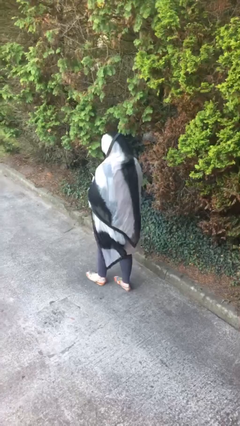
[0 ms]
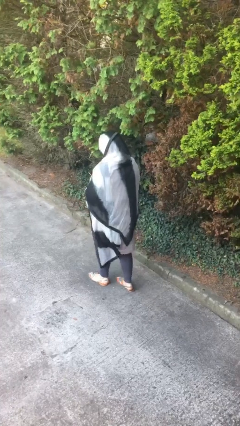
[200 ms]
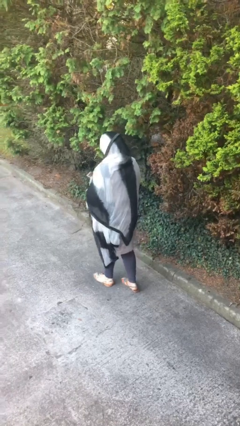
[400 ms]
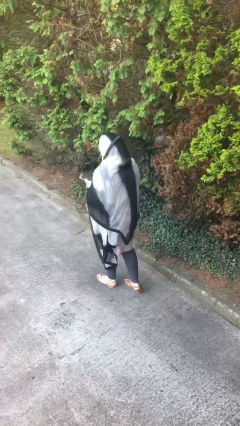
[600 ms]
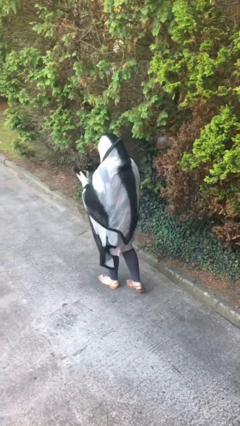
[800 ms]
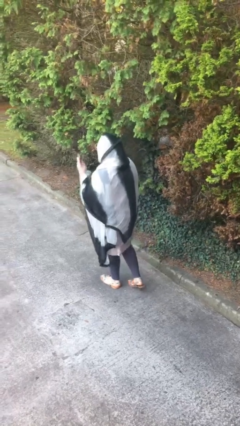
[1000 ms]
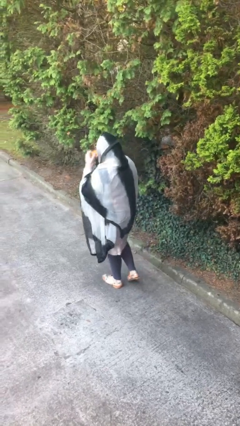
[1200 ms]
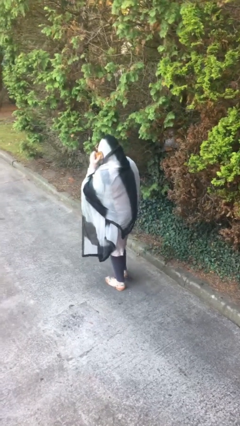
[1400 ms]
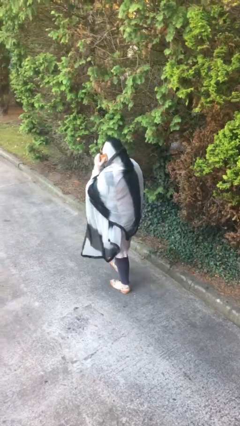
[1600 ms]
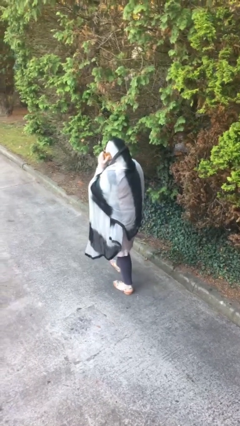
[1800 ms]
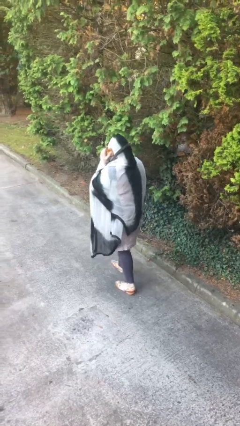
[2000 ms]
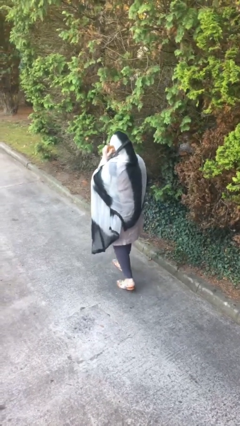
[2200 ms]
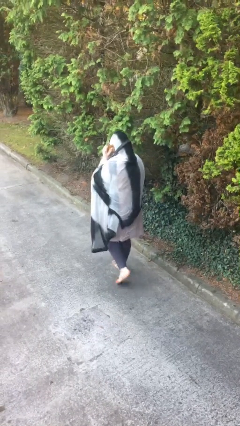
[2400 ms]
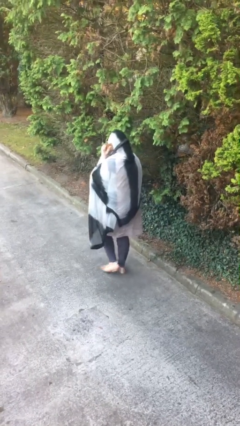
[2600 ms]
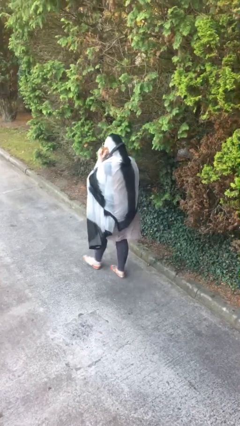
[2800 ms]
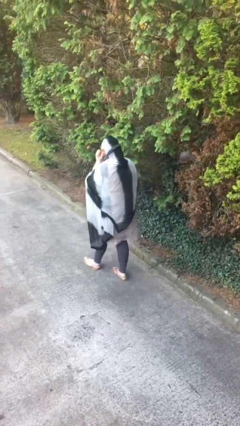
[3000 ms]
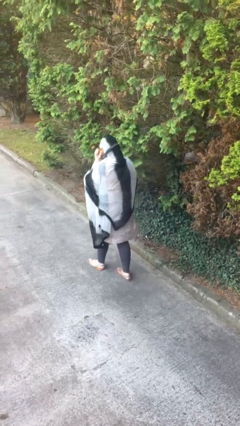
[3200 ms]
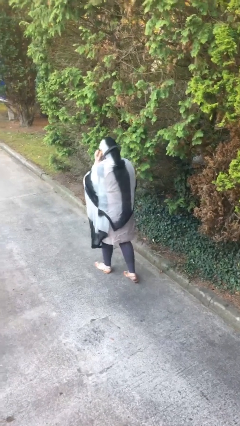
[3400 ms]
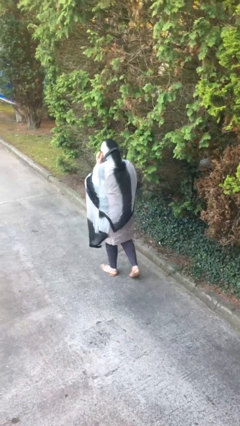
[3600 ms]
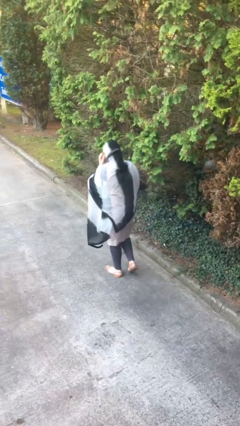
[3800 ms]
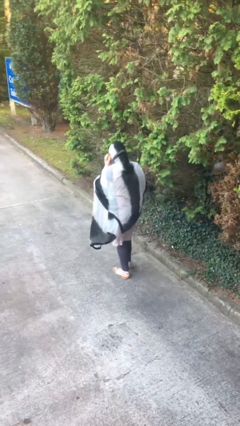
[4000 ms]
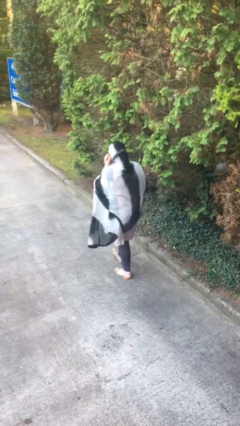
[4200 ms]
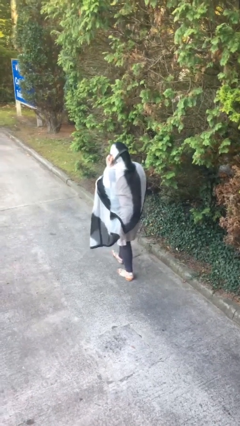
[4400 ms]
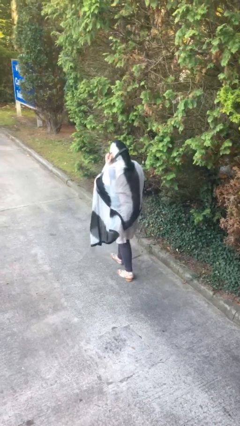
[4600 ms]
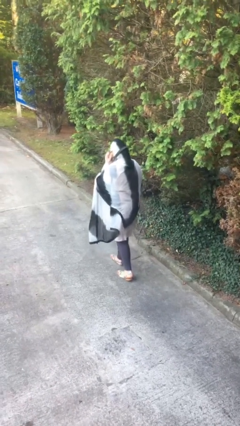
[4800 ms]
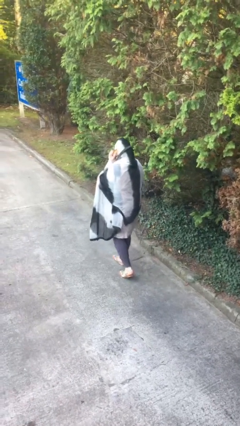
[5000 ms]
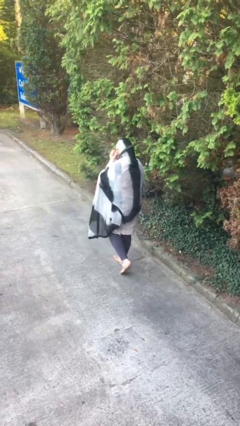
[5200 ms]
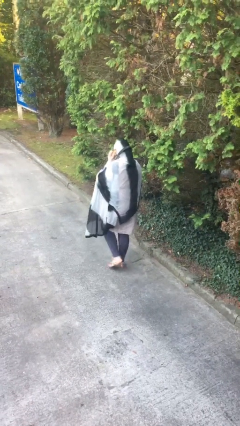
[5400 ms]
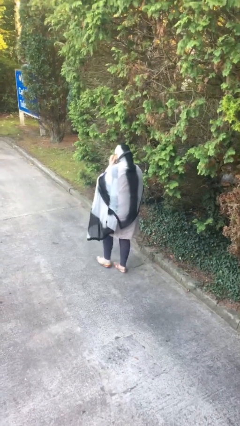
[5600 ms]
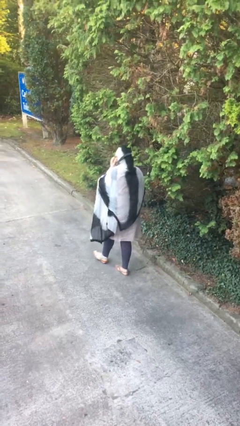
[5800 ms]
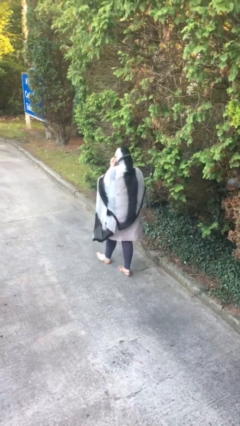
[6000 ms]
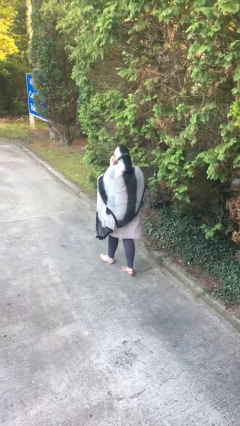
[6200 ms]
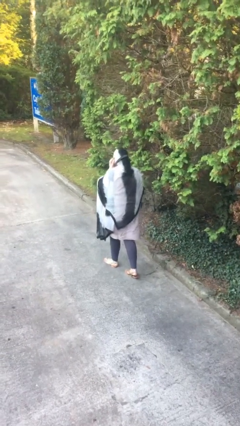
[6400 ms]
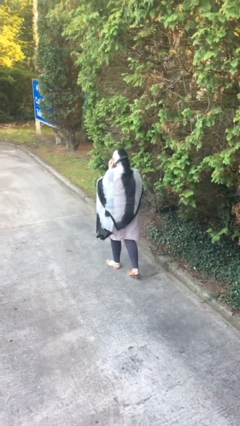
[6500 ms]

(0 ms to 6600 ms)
person talks on phone

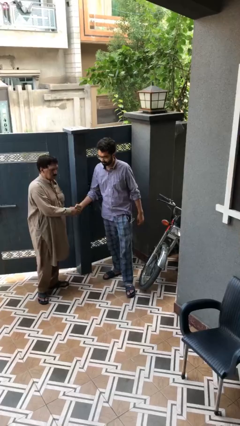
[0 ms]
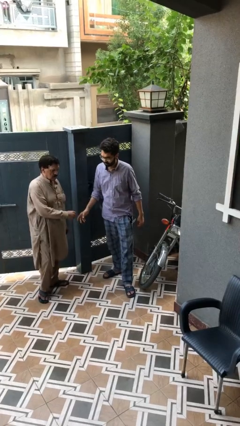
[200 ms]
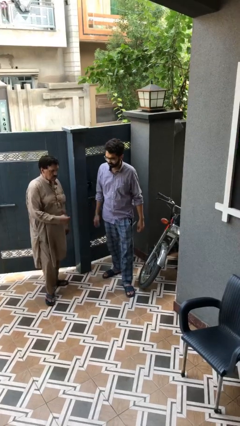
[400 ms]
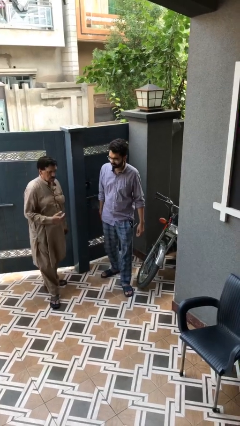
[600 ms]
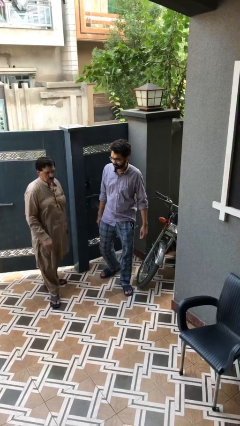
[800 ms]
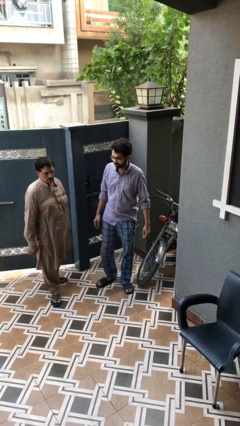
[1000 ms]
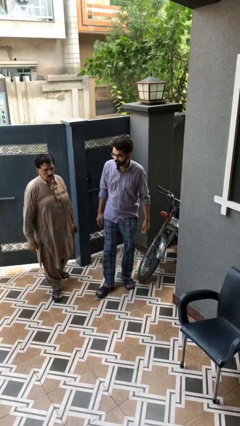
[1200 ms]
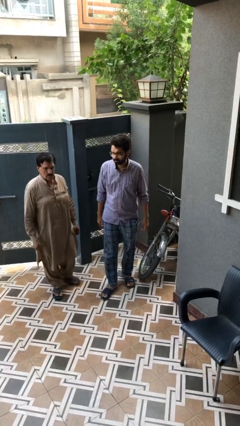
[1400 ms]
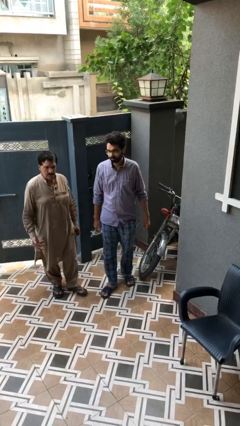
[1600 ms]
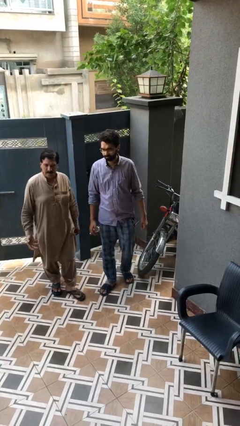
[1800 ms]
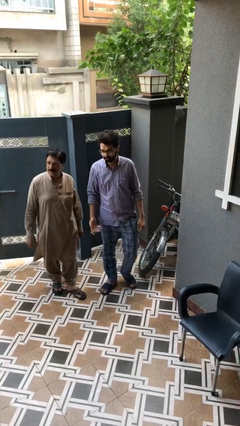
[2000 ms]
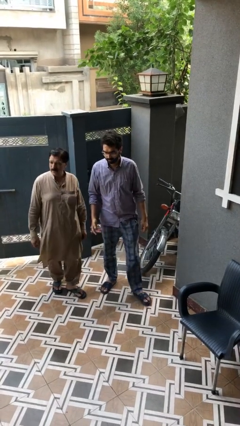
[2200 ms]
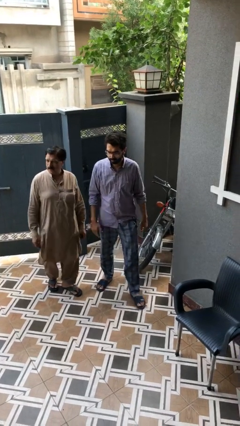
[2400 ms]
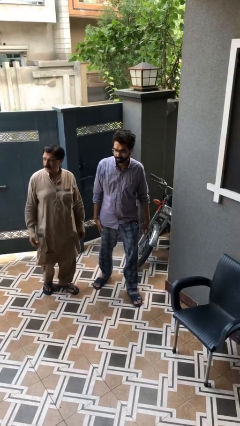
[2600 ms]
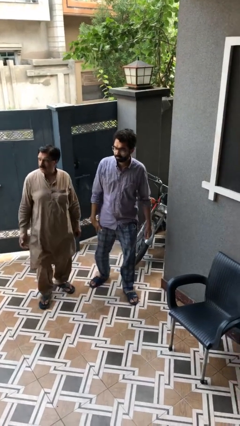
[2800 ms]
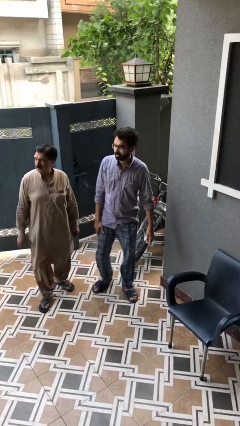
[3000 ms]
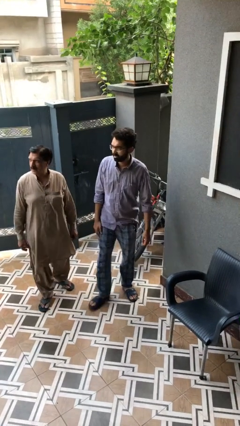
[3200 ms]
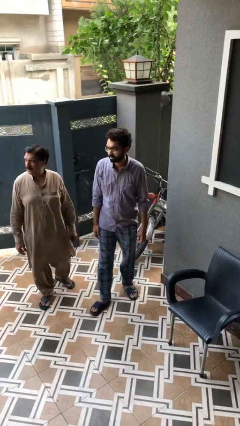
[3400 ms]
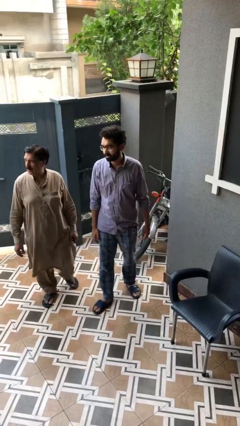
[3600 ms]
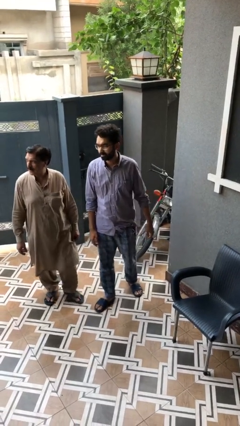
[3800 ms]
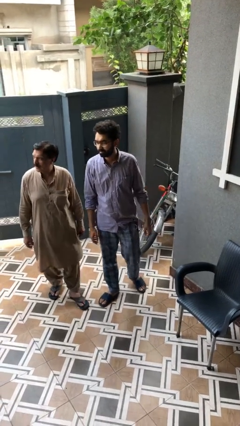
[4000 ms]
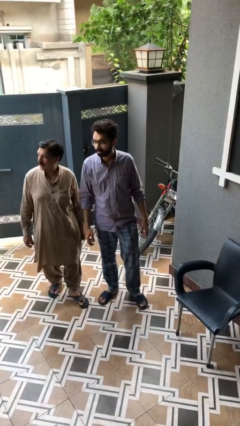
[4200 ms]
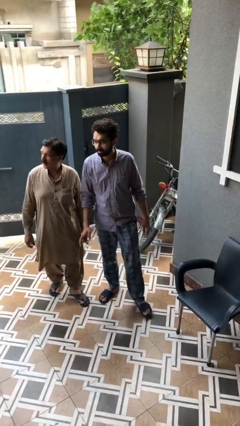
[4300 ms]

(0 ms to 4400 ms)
person talks to person

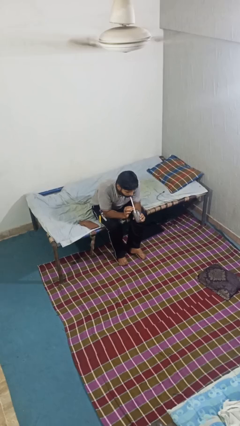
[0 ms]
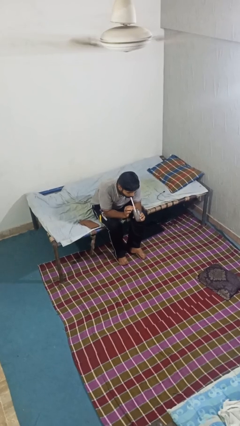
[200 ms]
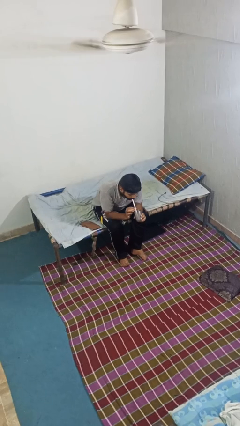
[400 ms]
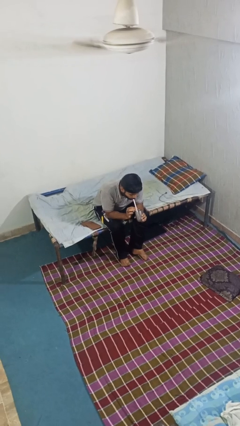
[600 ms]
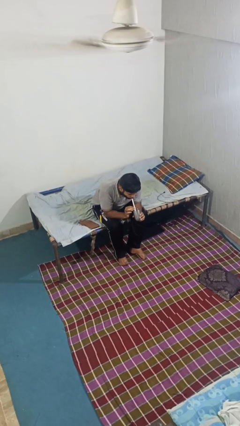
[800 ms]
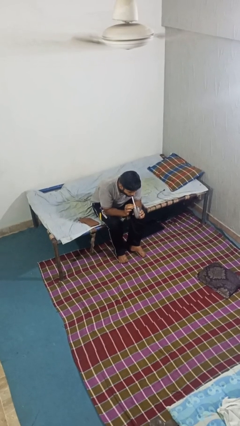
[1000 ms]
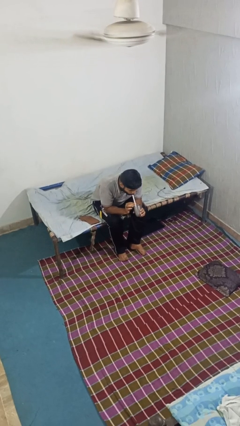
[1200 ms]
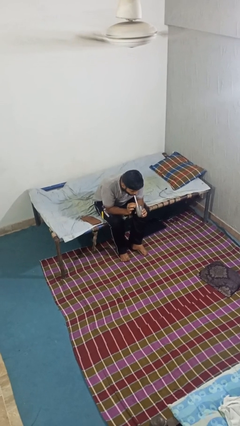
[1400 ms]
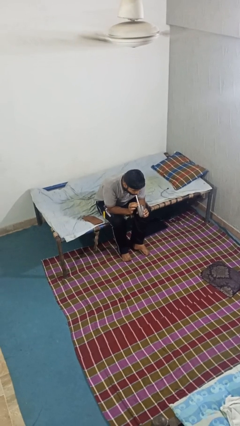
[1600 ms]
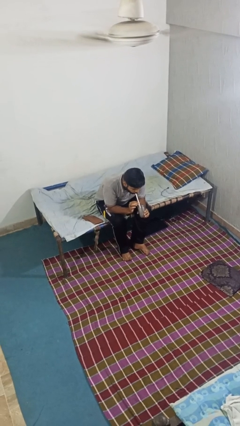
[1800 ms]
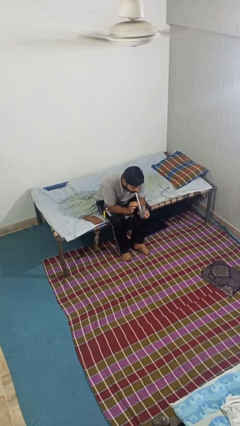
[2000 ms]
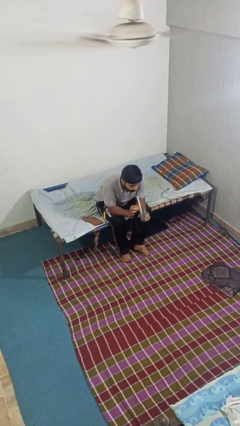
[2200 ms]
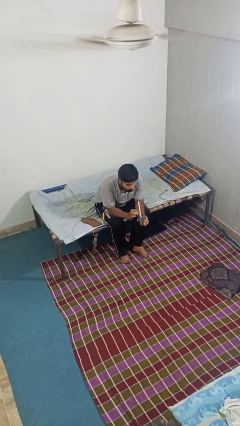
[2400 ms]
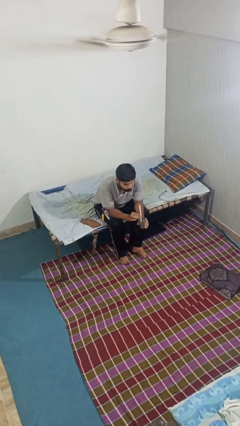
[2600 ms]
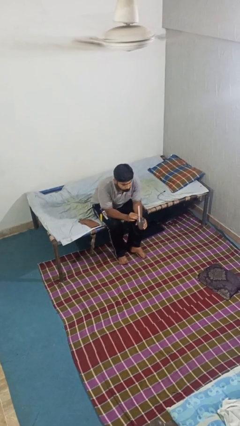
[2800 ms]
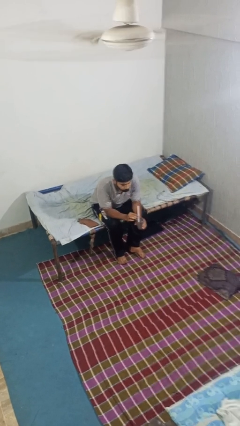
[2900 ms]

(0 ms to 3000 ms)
person drinks from straw

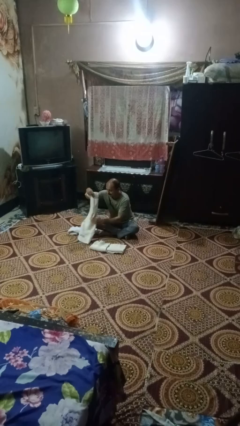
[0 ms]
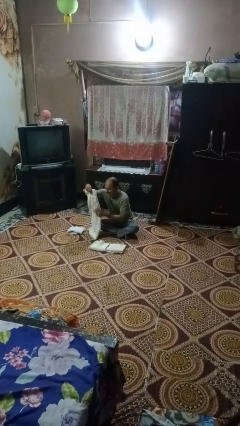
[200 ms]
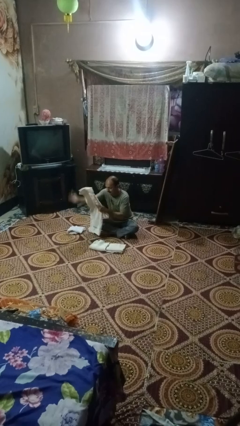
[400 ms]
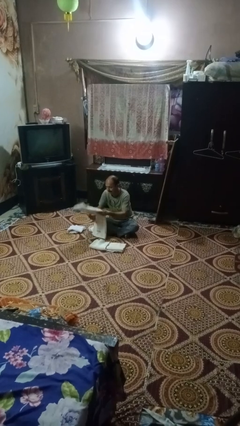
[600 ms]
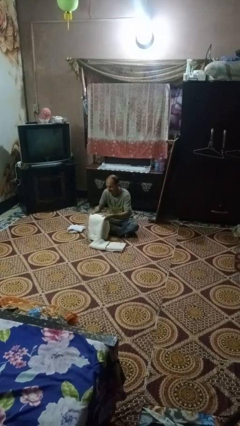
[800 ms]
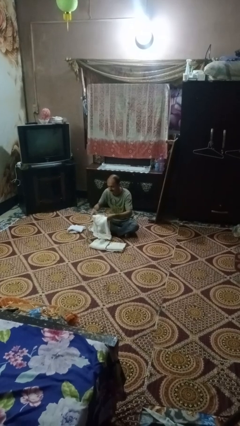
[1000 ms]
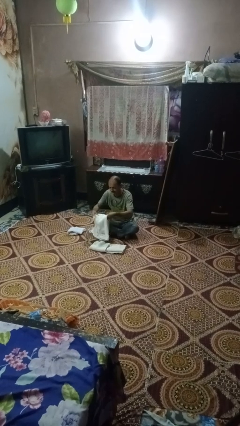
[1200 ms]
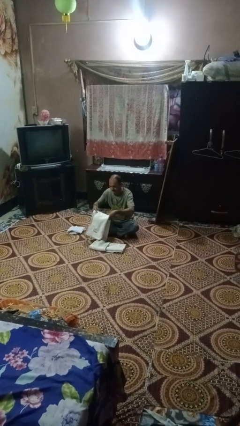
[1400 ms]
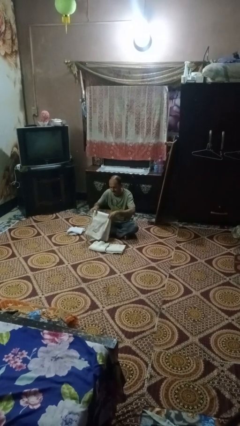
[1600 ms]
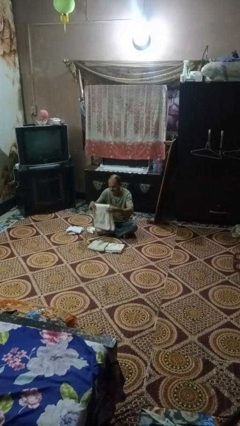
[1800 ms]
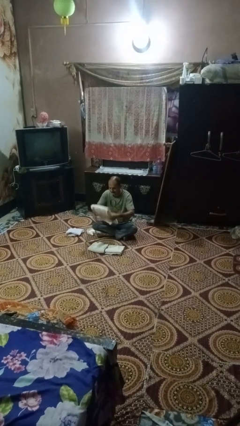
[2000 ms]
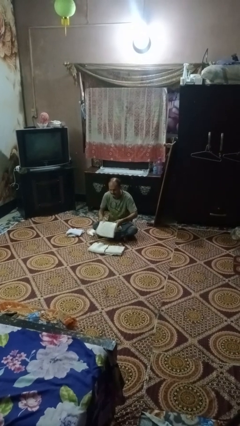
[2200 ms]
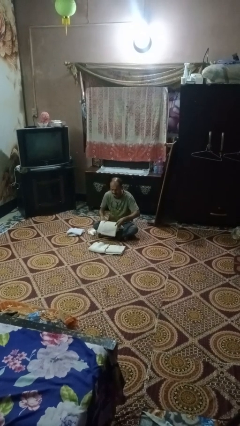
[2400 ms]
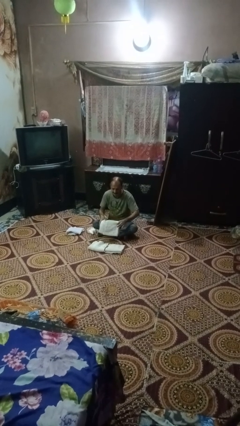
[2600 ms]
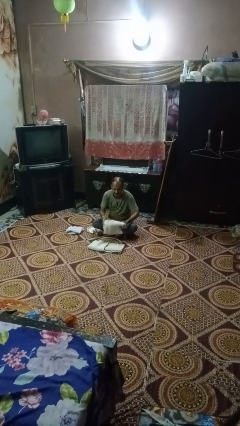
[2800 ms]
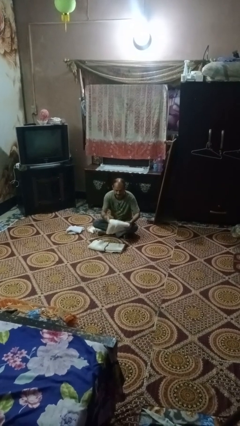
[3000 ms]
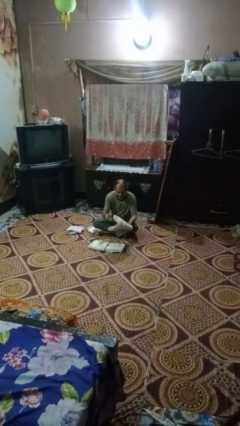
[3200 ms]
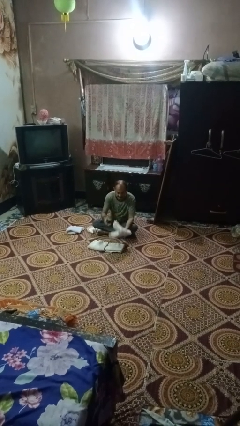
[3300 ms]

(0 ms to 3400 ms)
person folds towel

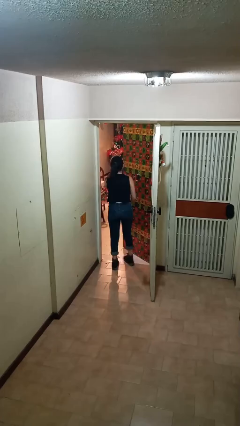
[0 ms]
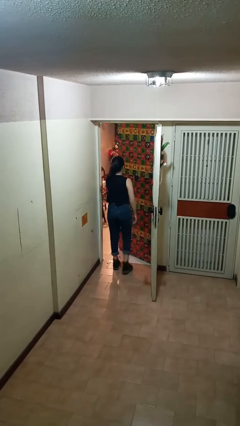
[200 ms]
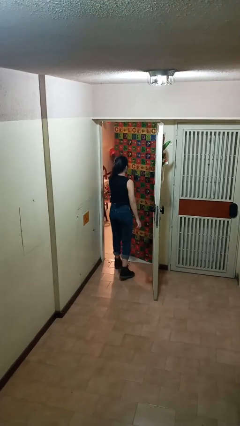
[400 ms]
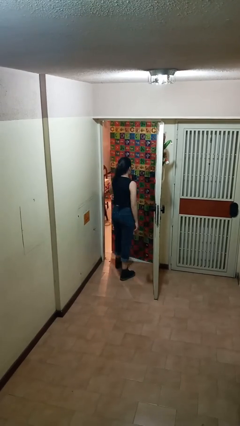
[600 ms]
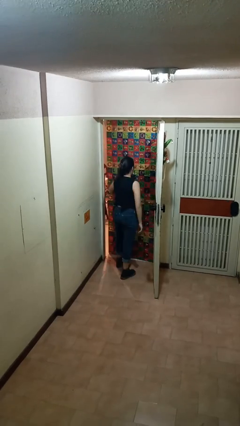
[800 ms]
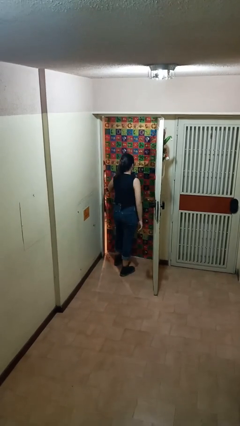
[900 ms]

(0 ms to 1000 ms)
person closes facility door
